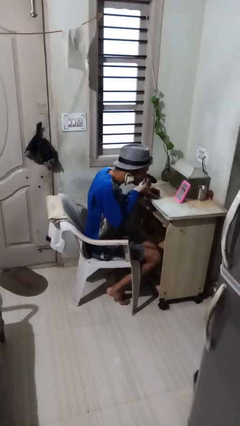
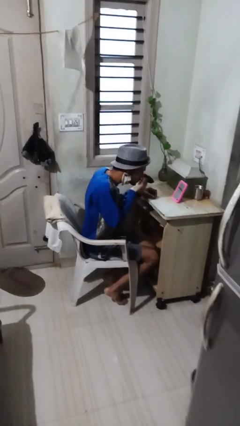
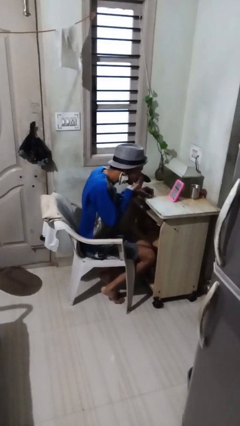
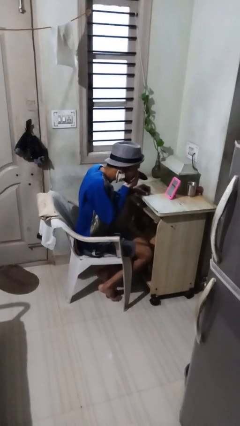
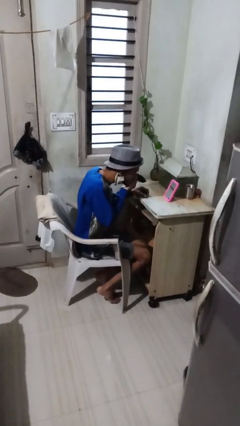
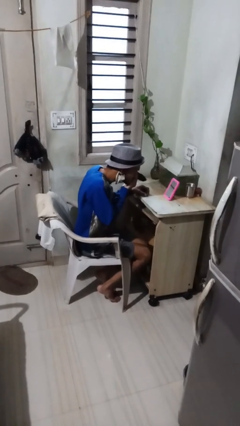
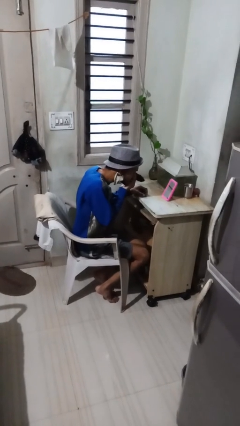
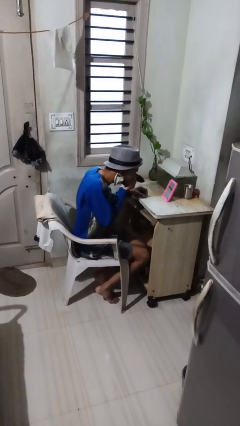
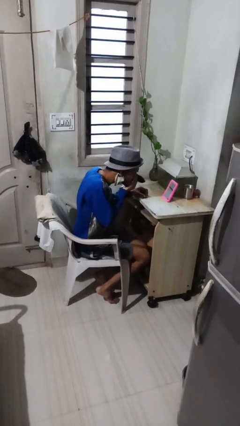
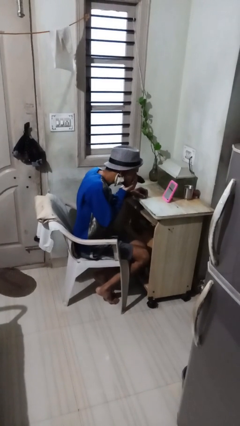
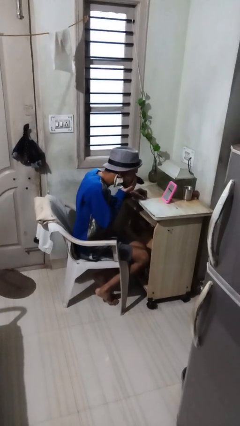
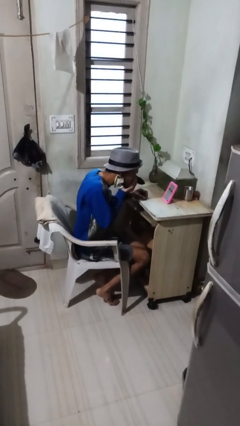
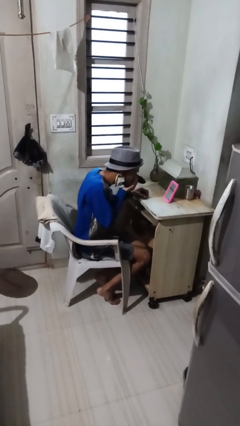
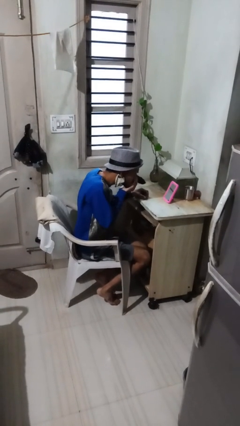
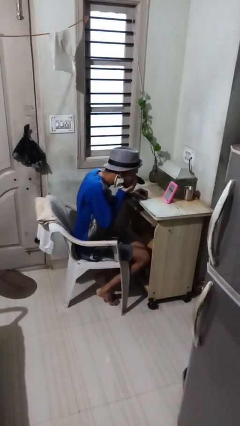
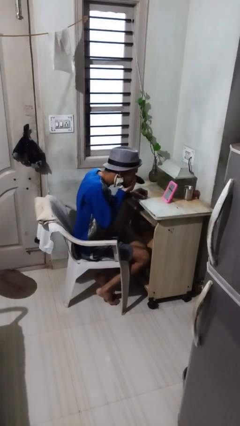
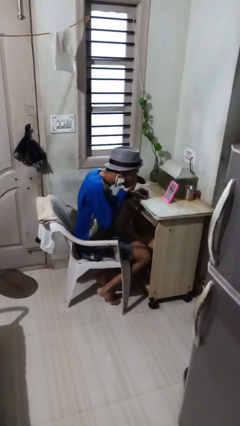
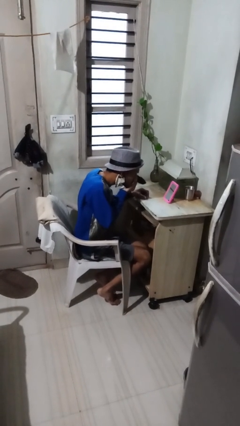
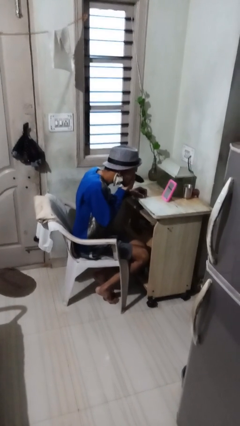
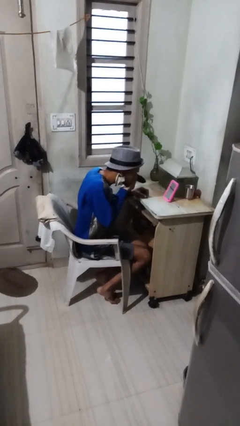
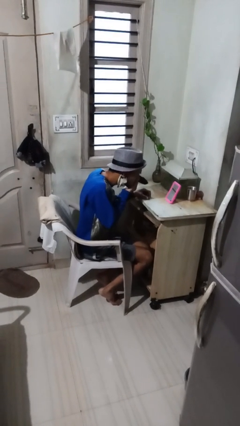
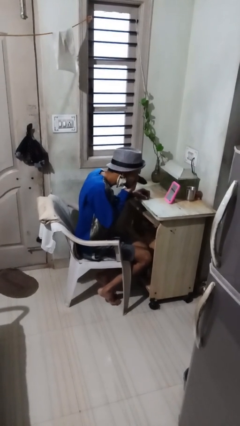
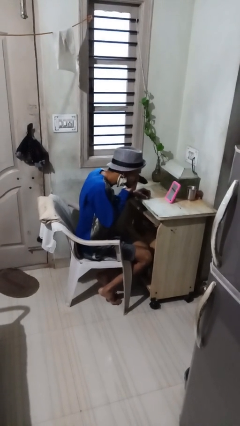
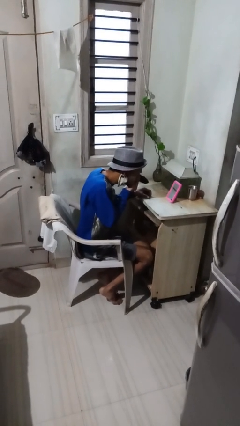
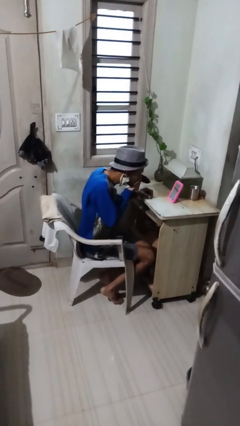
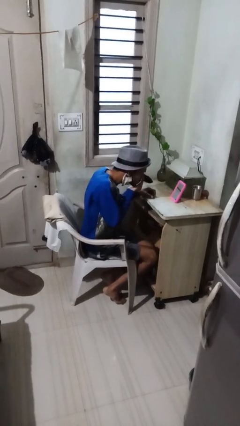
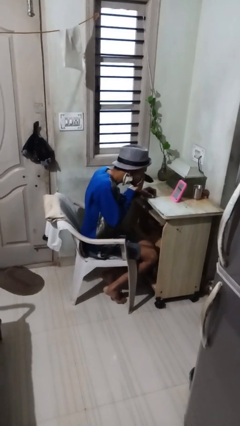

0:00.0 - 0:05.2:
person applies eye makeup

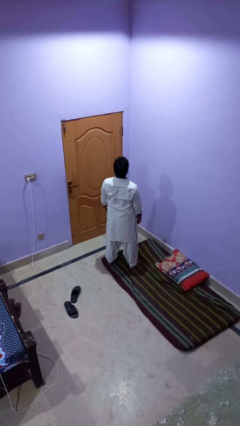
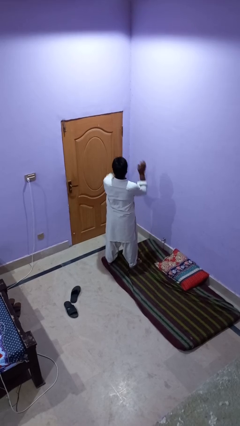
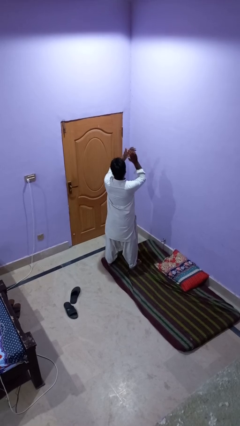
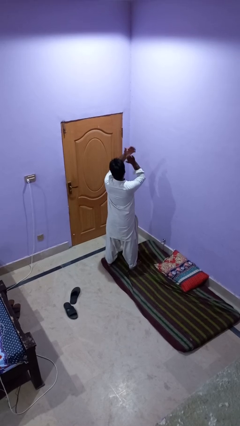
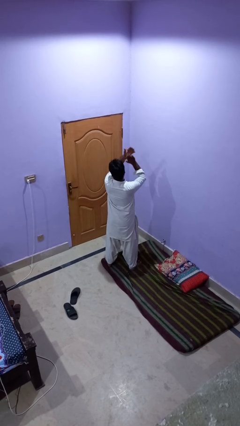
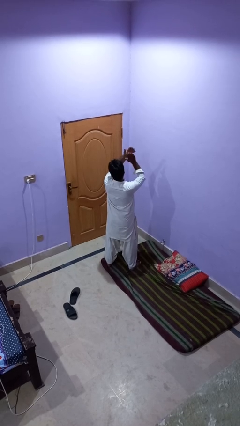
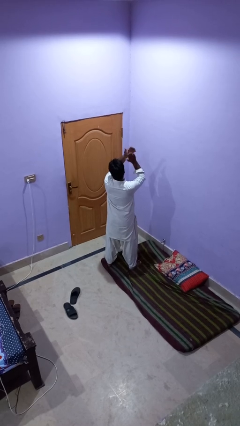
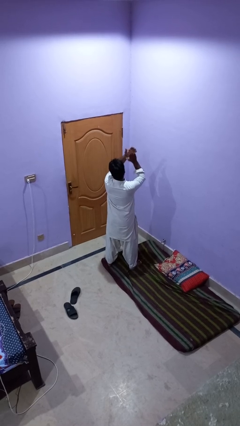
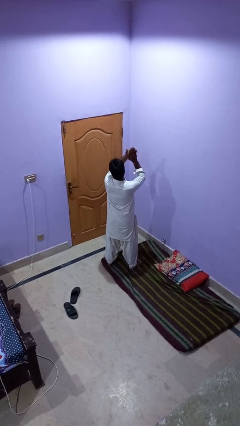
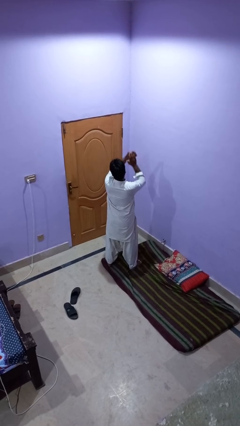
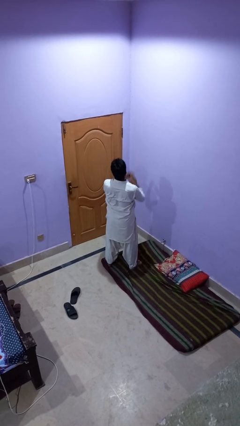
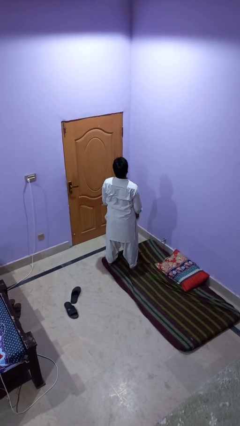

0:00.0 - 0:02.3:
person claps hands

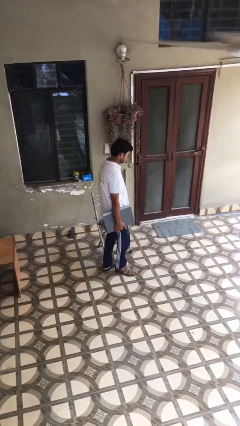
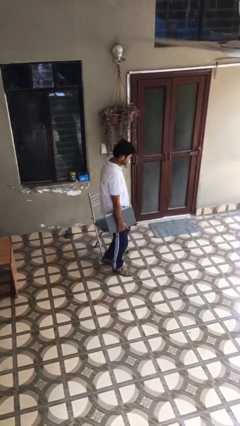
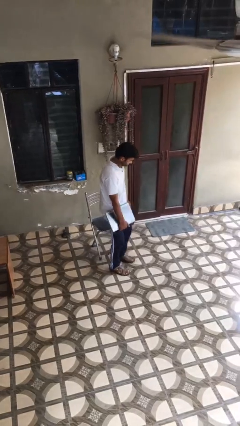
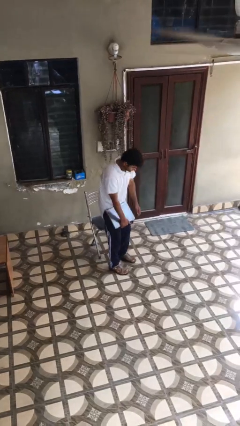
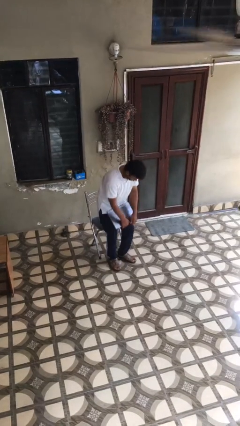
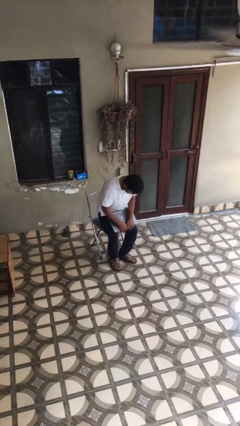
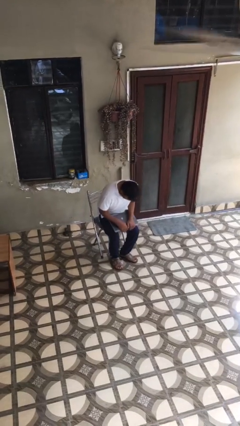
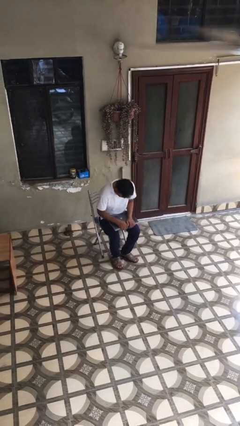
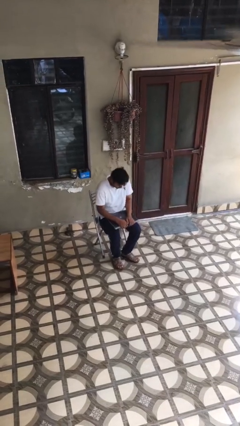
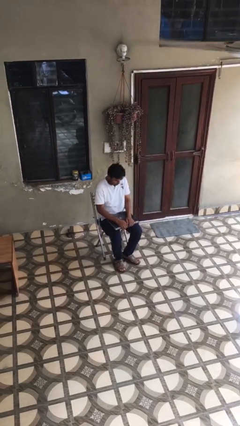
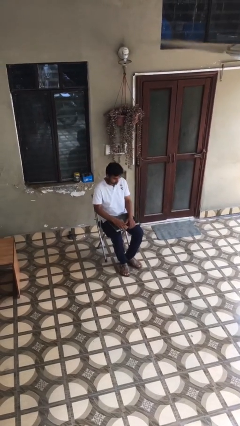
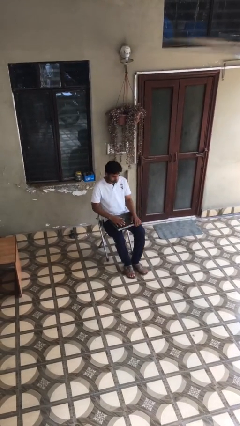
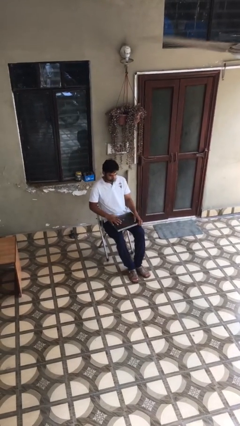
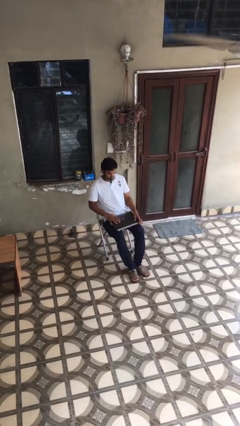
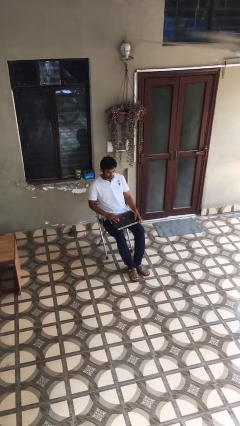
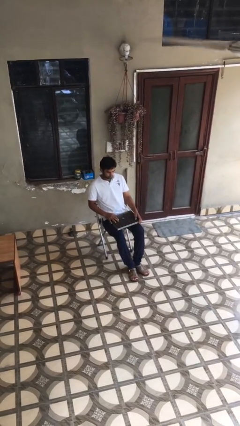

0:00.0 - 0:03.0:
person sits down

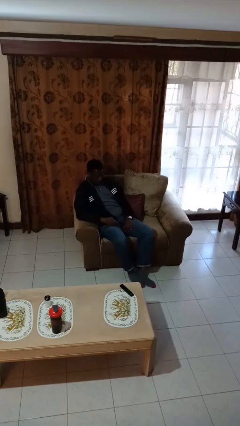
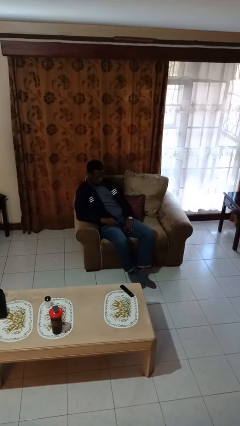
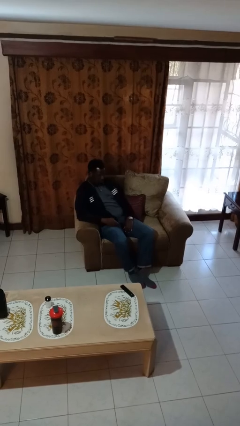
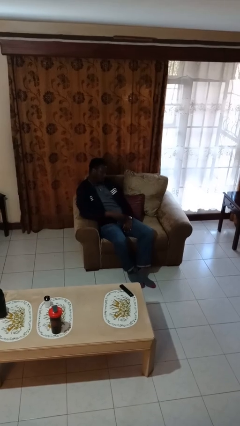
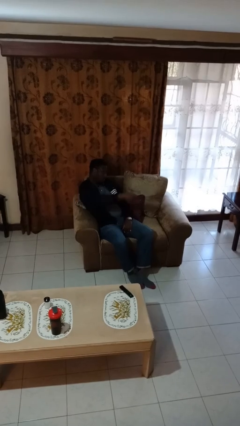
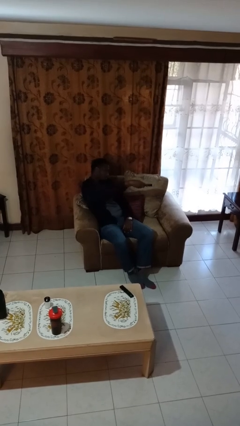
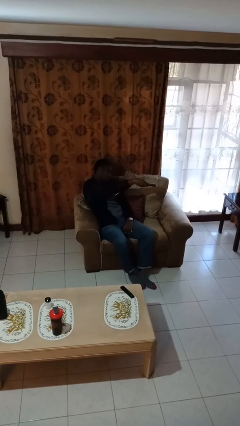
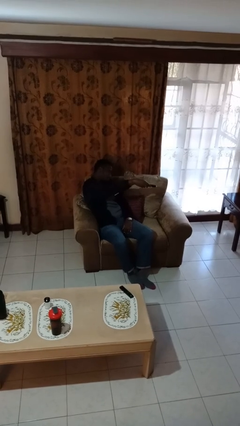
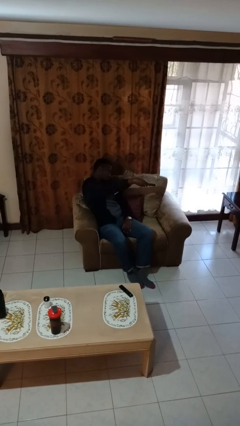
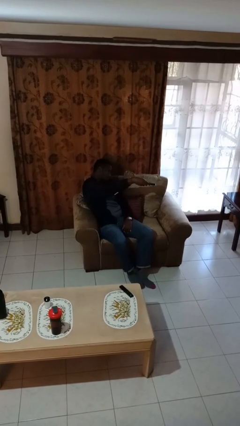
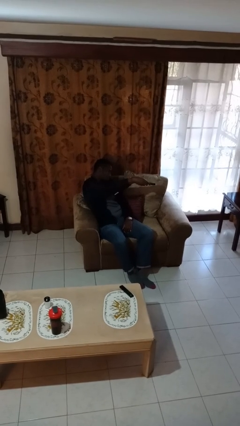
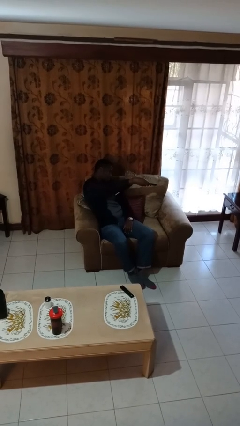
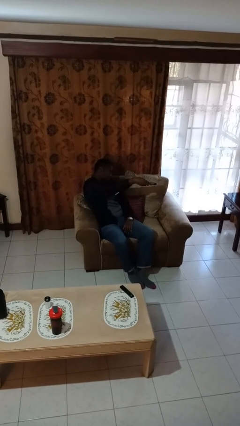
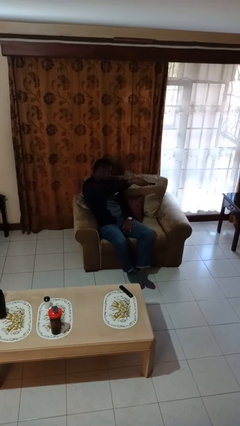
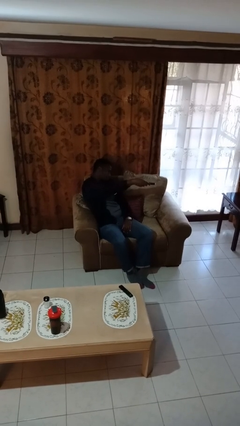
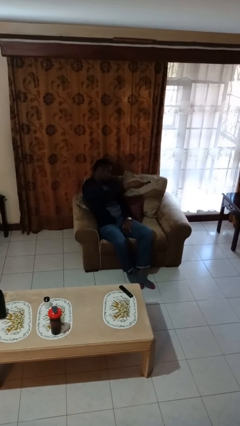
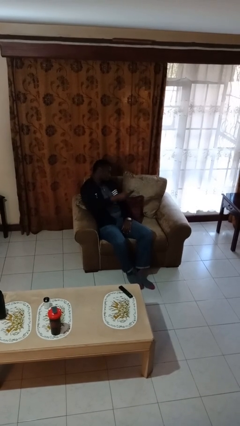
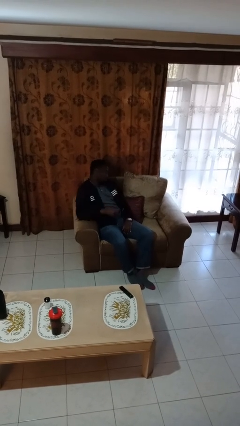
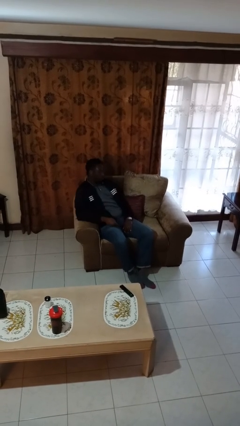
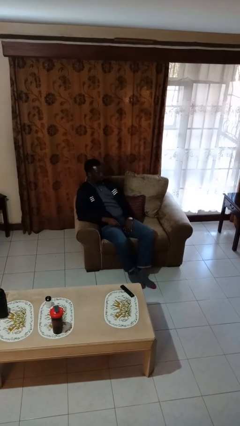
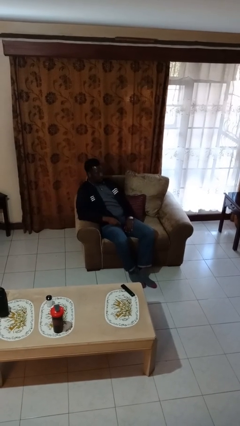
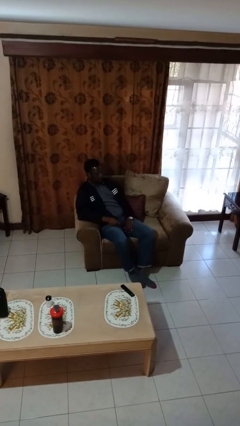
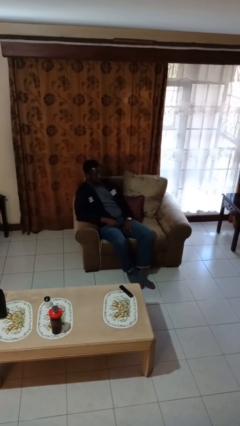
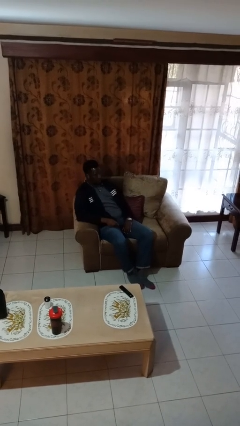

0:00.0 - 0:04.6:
person uses television remote

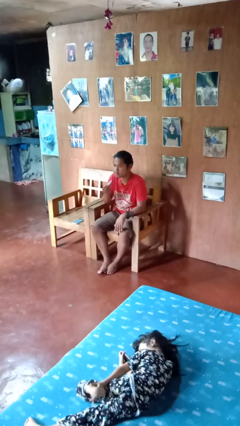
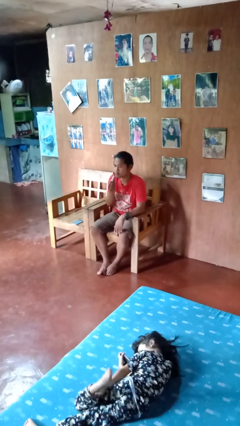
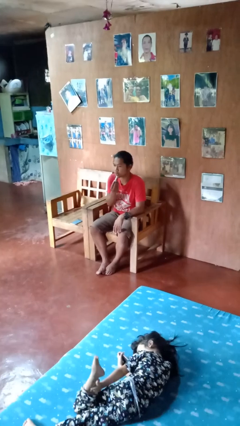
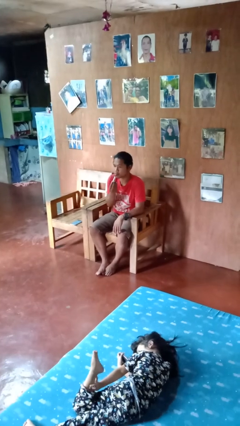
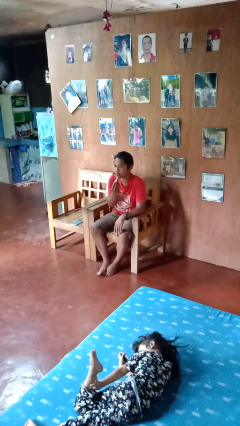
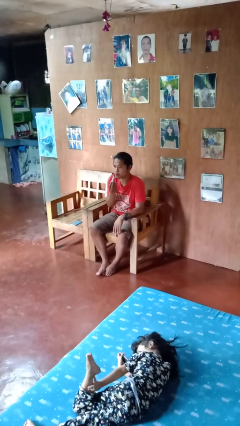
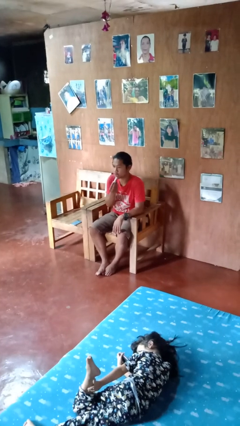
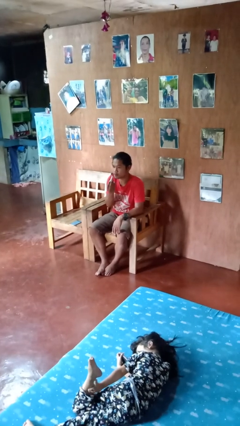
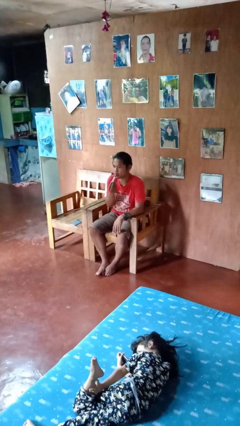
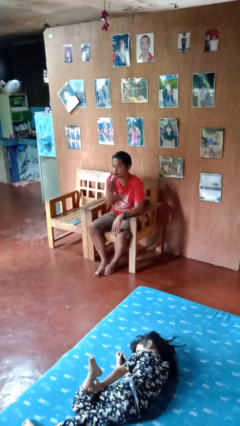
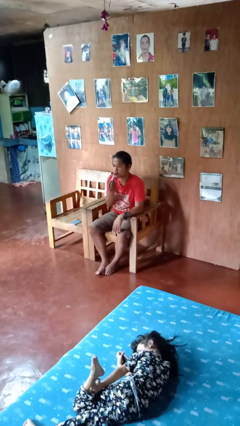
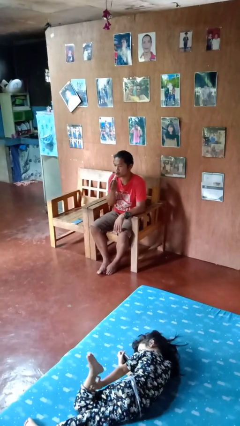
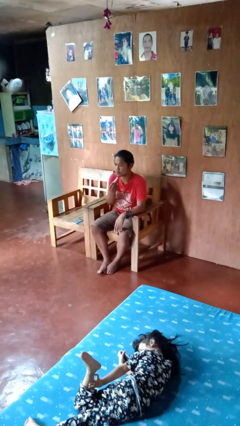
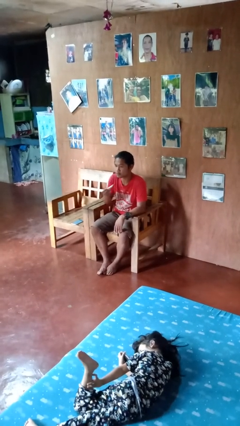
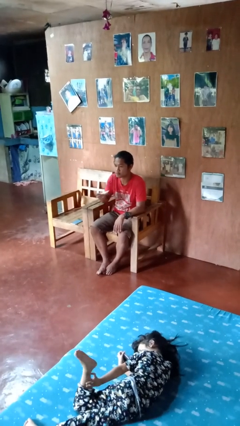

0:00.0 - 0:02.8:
person applies lip makeup
